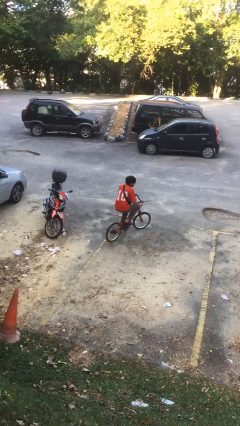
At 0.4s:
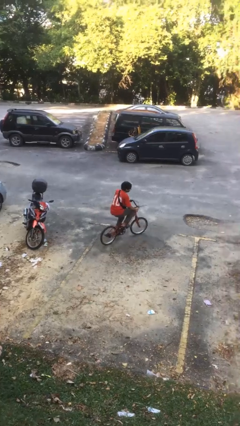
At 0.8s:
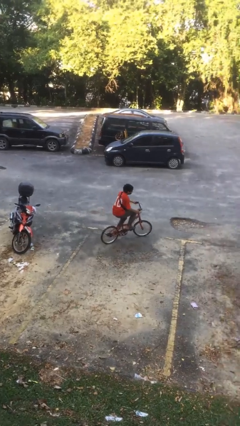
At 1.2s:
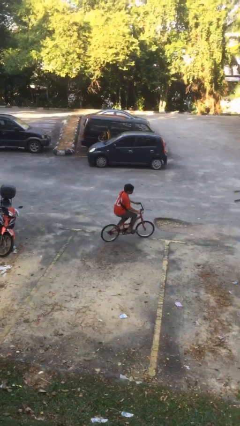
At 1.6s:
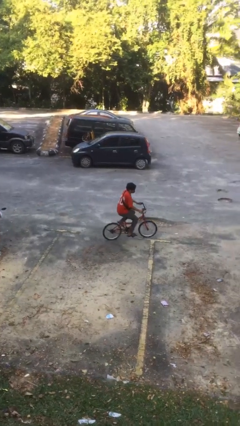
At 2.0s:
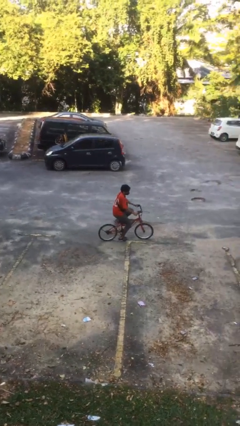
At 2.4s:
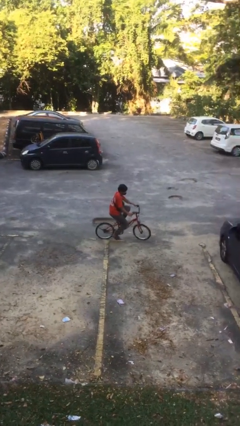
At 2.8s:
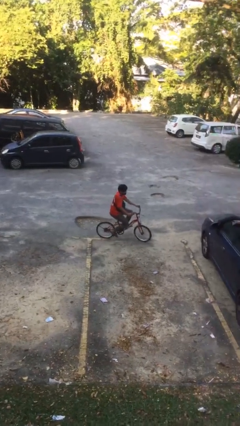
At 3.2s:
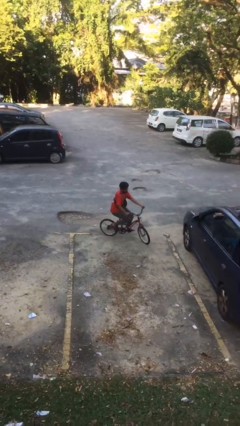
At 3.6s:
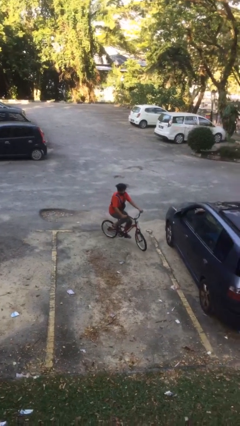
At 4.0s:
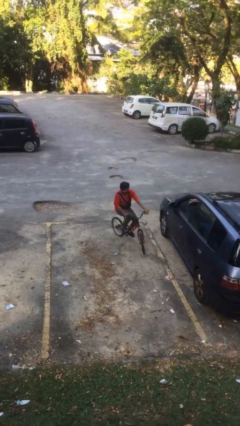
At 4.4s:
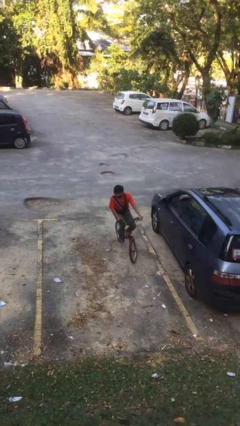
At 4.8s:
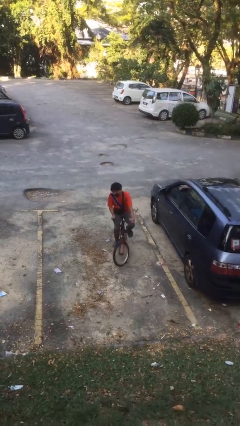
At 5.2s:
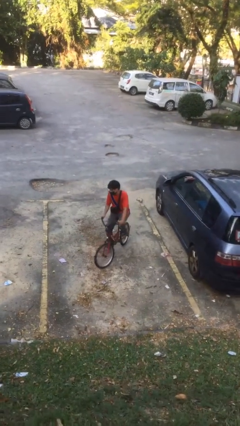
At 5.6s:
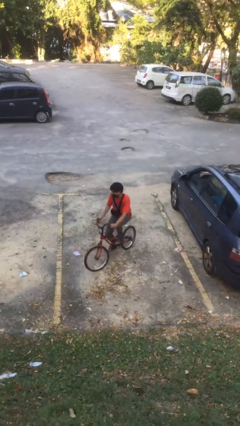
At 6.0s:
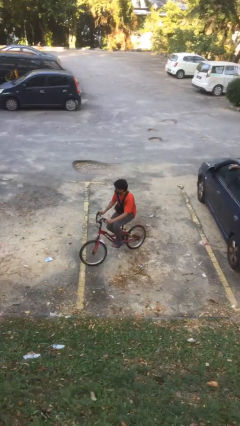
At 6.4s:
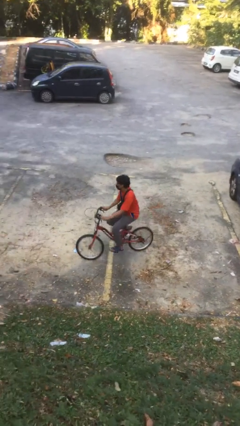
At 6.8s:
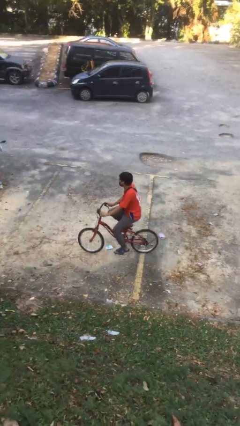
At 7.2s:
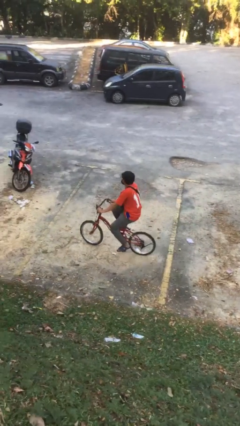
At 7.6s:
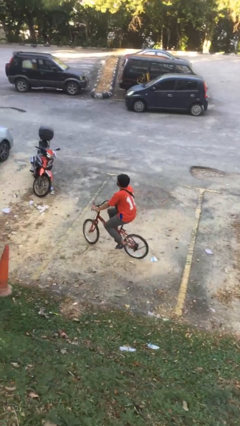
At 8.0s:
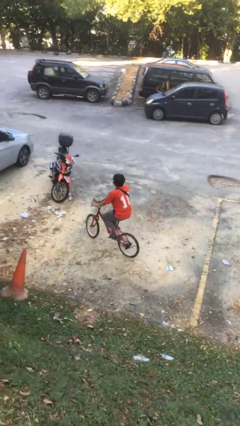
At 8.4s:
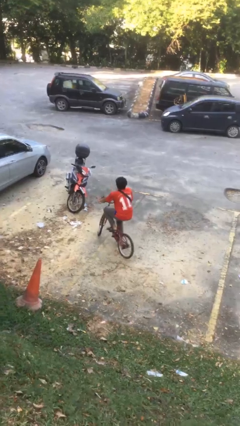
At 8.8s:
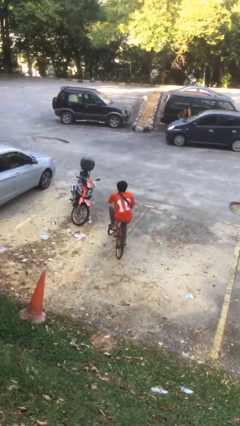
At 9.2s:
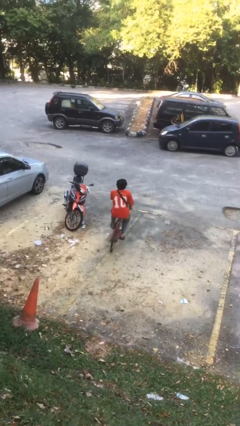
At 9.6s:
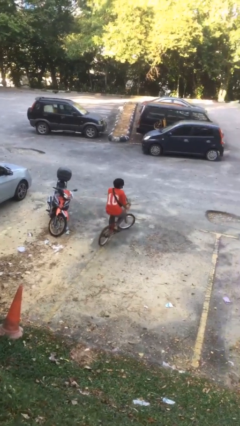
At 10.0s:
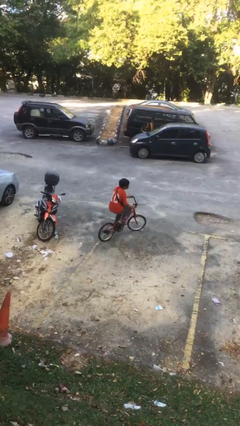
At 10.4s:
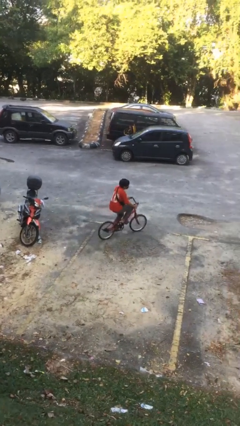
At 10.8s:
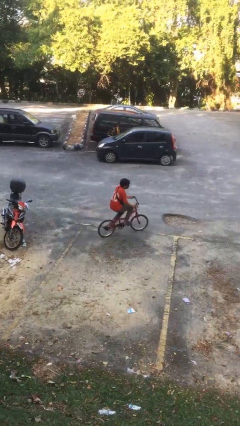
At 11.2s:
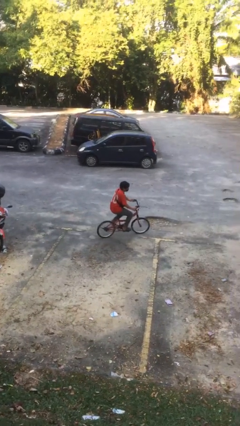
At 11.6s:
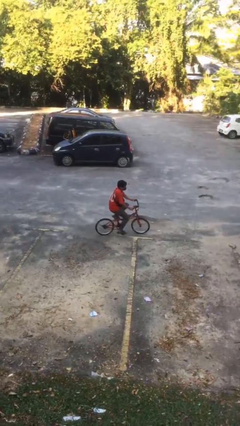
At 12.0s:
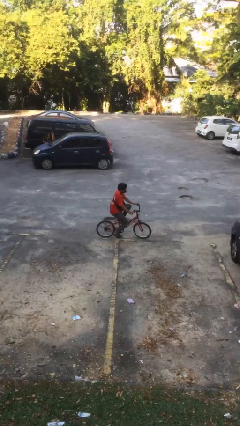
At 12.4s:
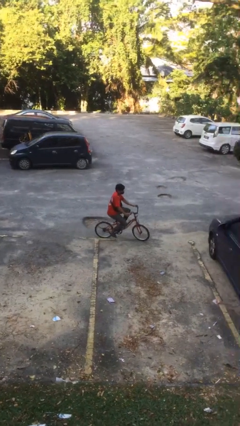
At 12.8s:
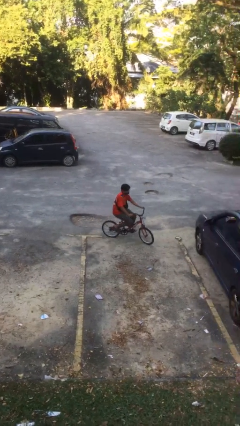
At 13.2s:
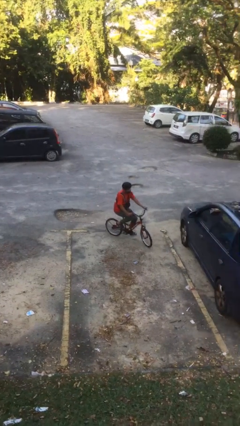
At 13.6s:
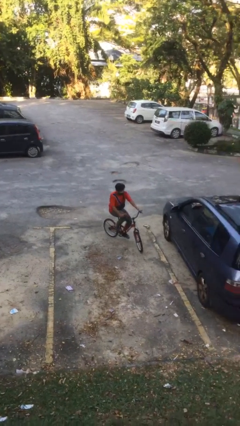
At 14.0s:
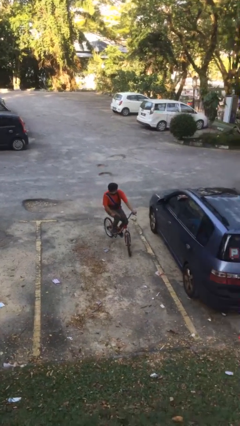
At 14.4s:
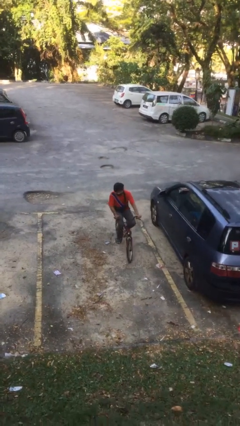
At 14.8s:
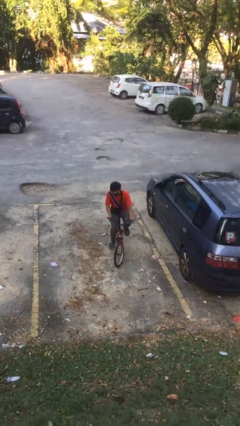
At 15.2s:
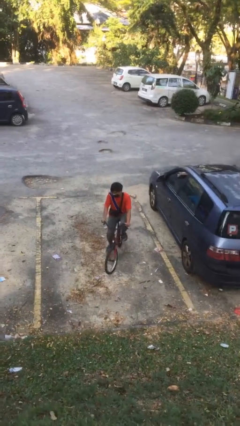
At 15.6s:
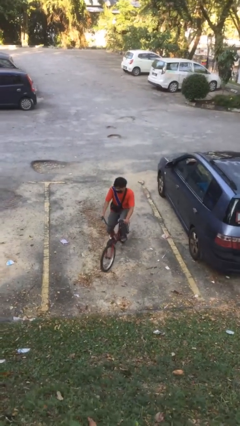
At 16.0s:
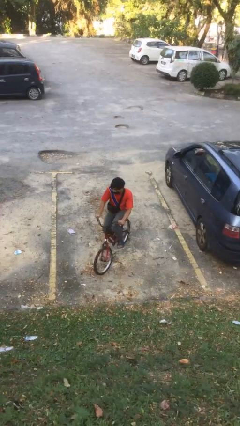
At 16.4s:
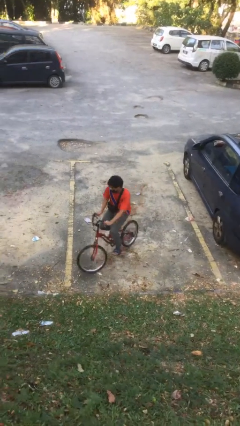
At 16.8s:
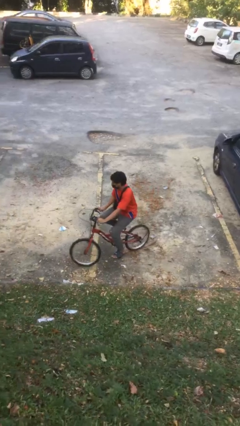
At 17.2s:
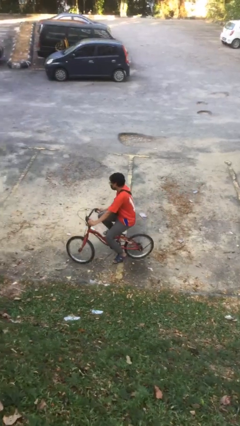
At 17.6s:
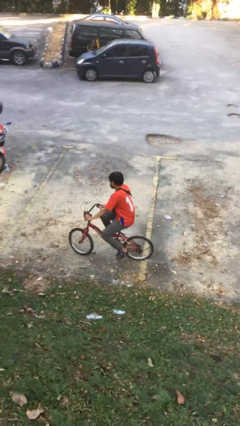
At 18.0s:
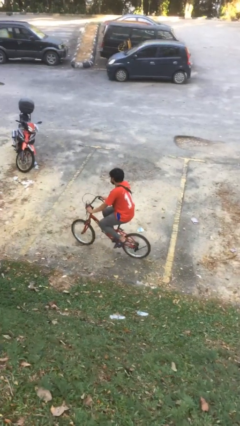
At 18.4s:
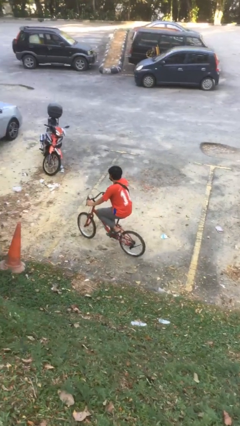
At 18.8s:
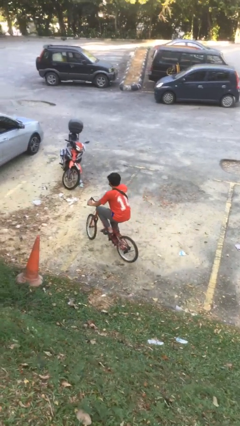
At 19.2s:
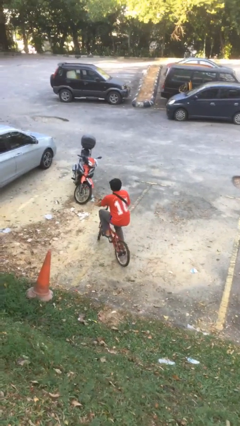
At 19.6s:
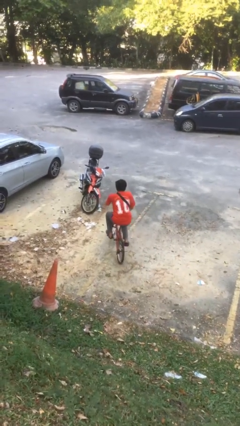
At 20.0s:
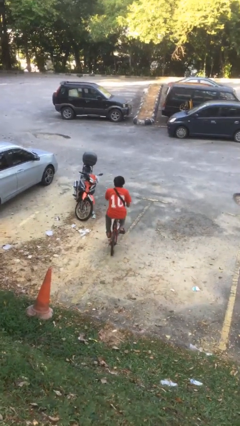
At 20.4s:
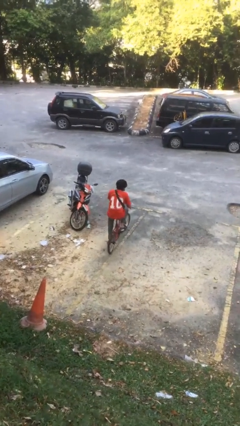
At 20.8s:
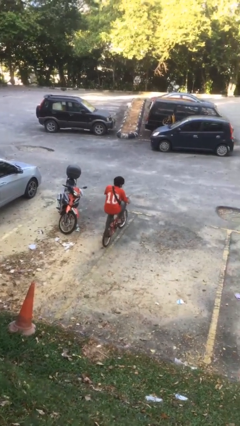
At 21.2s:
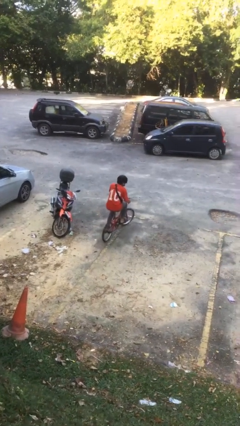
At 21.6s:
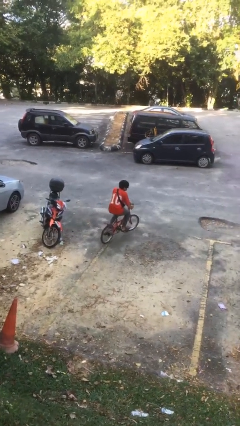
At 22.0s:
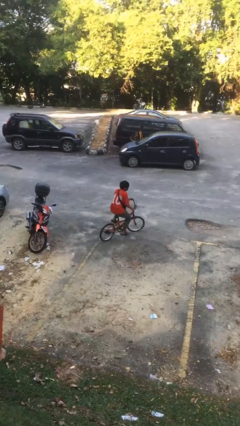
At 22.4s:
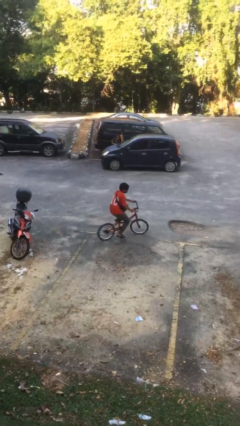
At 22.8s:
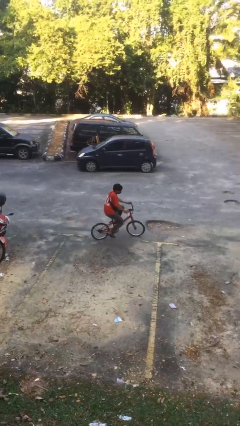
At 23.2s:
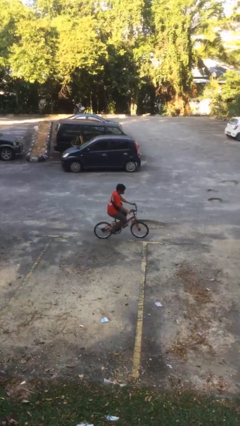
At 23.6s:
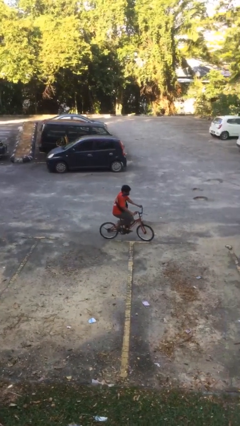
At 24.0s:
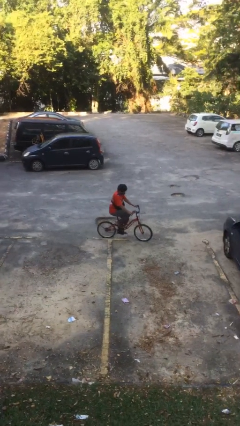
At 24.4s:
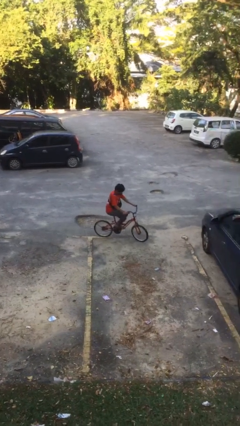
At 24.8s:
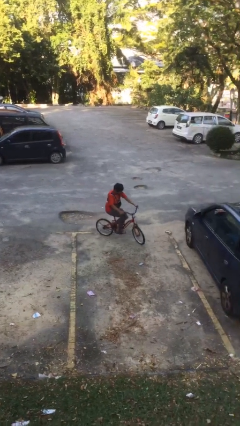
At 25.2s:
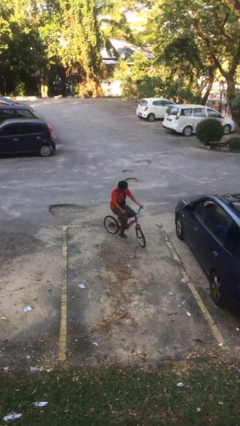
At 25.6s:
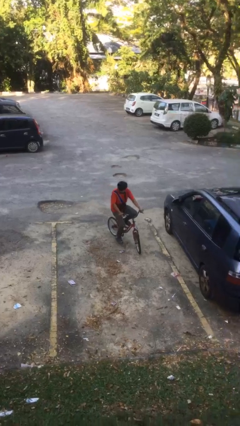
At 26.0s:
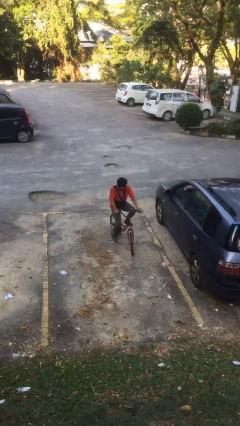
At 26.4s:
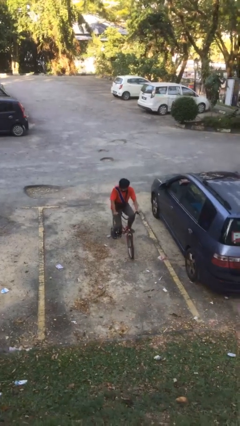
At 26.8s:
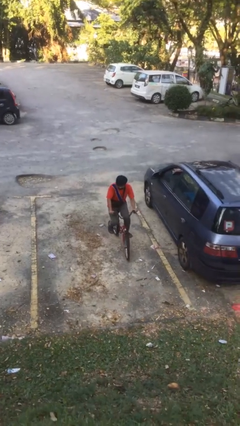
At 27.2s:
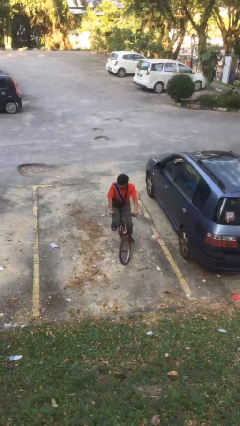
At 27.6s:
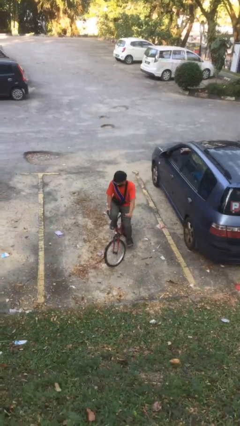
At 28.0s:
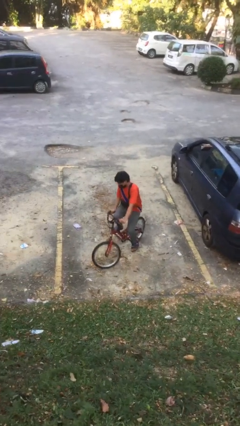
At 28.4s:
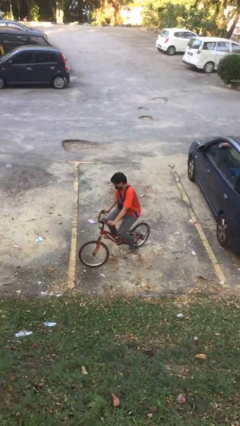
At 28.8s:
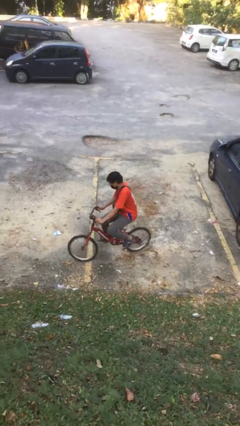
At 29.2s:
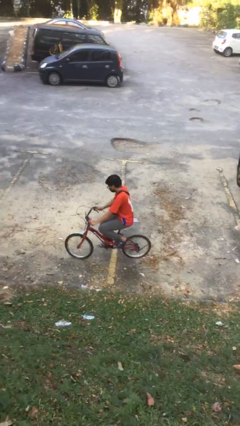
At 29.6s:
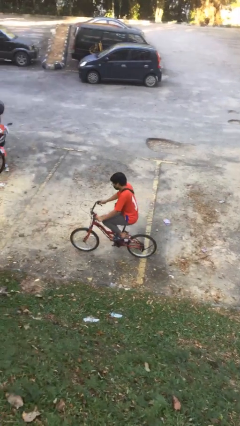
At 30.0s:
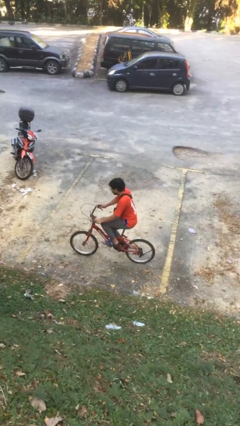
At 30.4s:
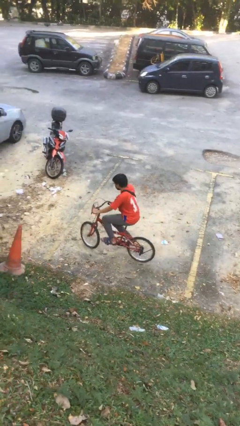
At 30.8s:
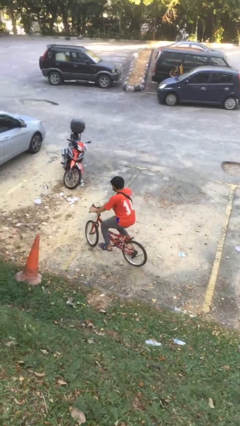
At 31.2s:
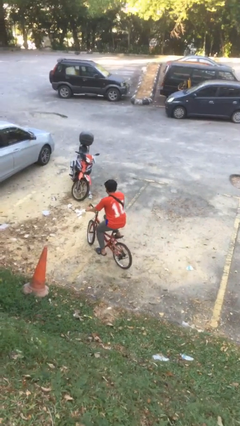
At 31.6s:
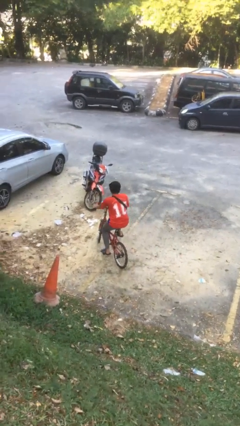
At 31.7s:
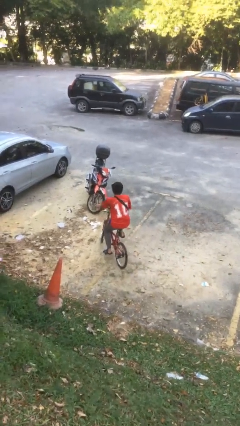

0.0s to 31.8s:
person rides bicycle

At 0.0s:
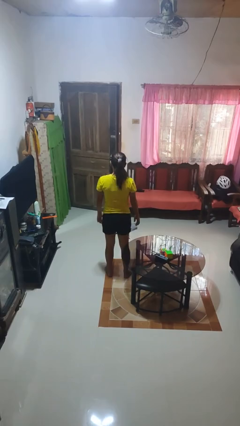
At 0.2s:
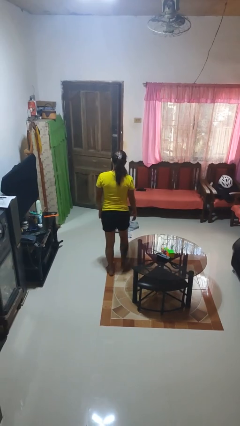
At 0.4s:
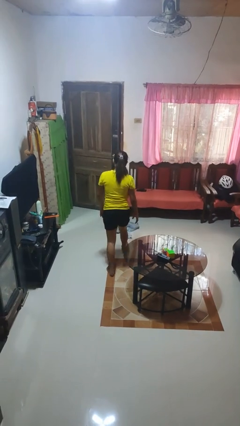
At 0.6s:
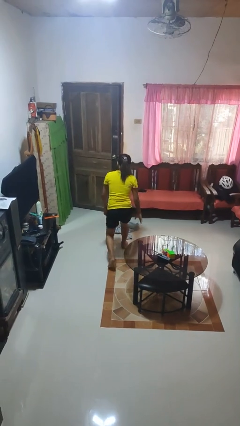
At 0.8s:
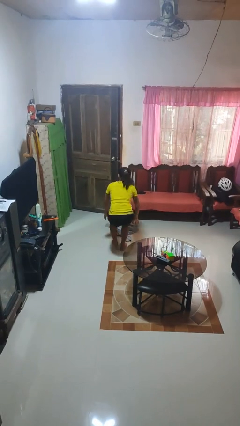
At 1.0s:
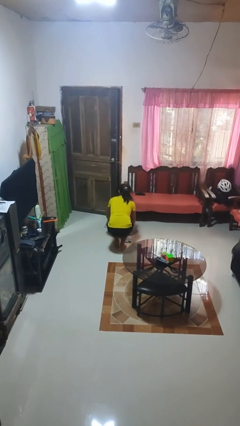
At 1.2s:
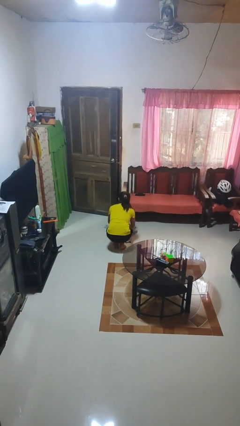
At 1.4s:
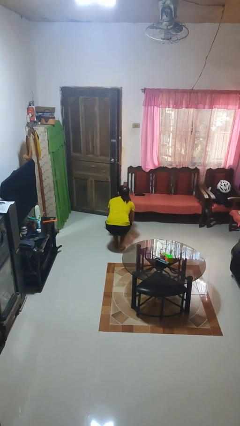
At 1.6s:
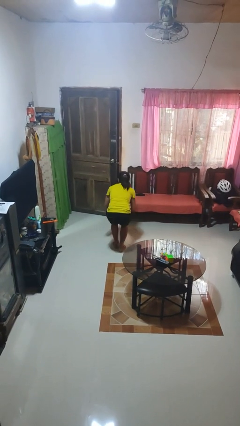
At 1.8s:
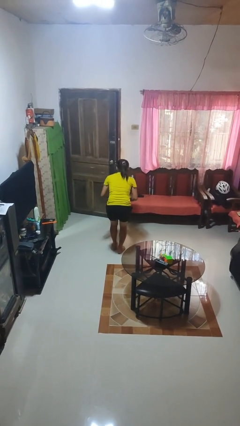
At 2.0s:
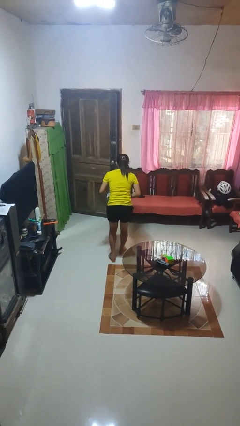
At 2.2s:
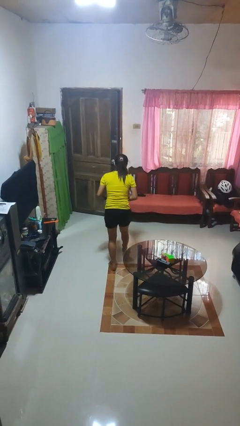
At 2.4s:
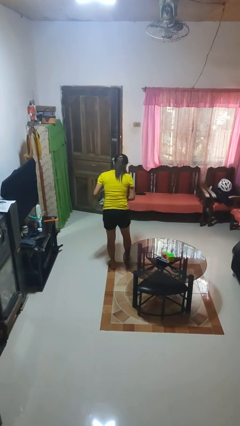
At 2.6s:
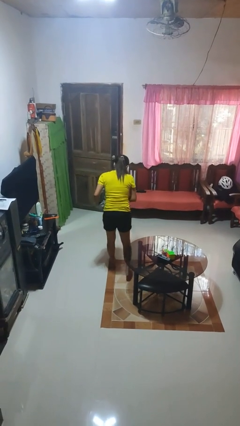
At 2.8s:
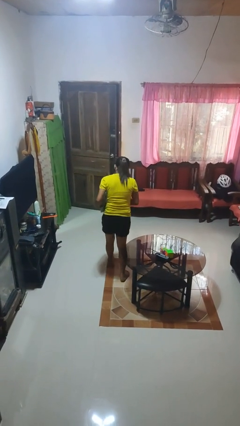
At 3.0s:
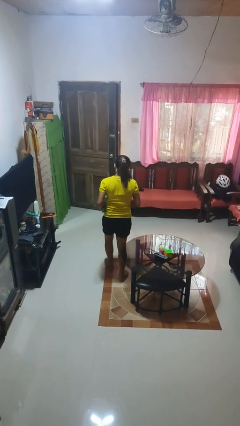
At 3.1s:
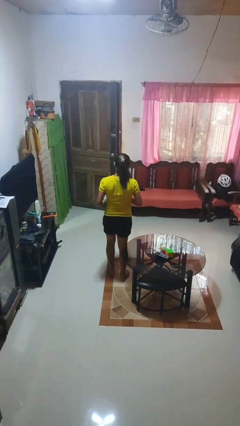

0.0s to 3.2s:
person picks up object from floor
